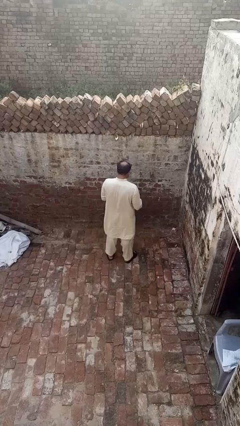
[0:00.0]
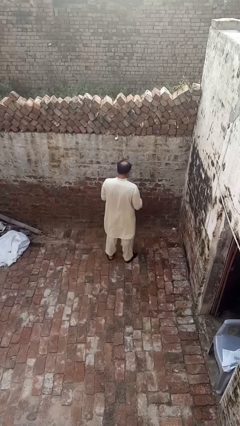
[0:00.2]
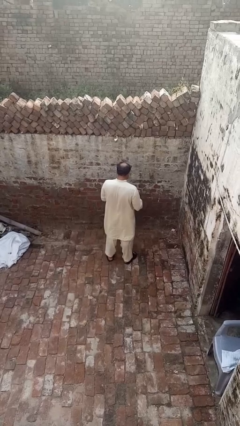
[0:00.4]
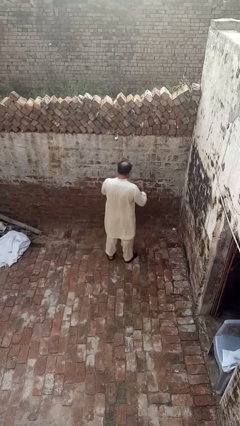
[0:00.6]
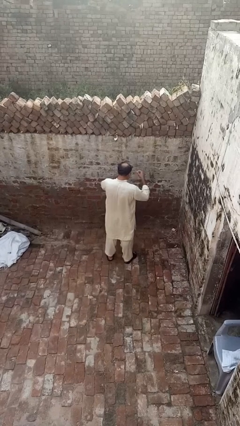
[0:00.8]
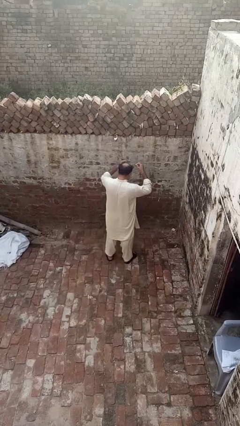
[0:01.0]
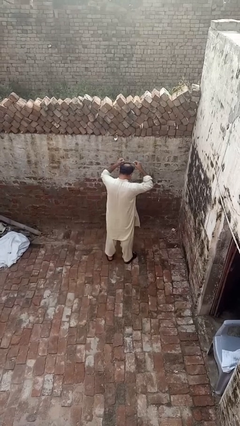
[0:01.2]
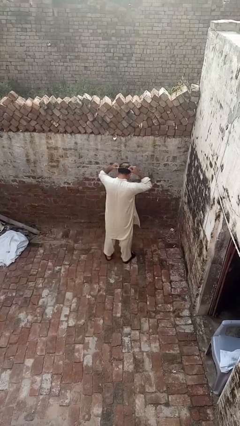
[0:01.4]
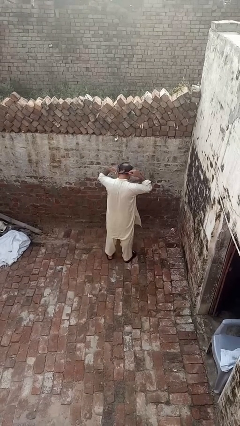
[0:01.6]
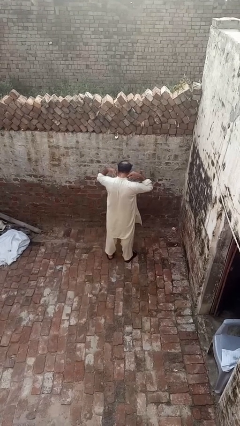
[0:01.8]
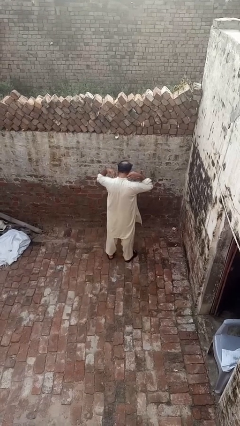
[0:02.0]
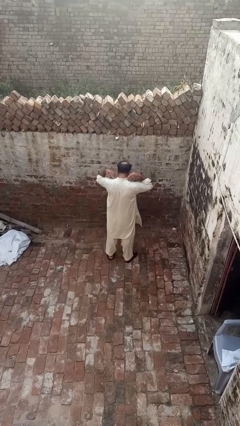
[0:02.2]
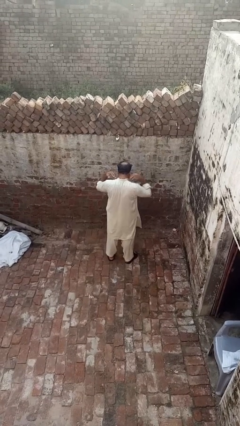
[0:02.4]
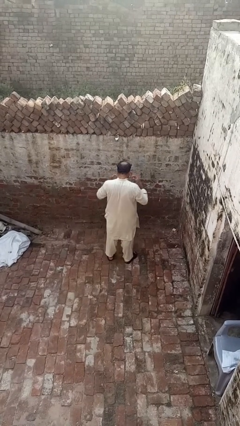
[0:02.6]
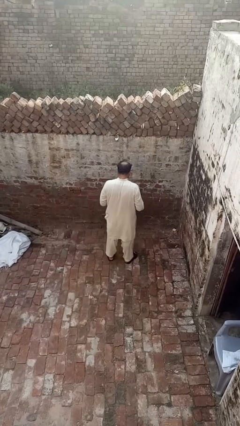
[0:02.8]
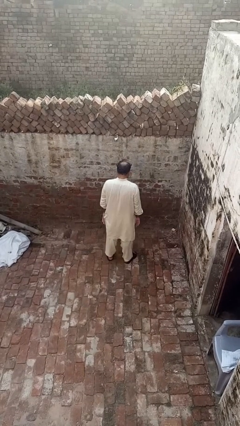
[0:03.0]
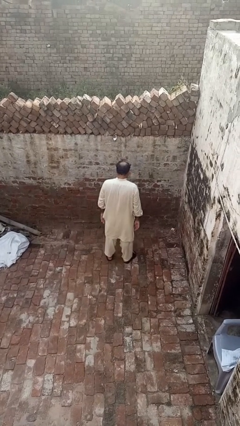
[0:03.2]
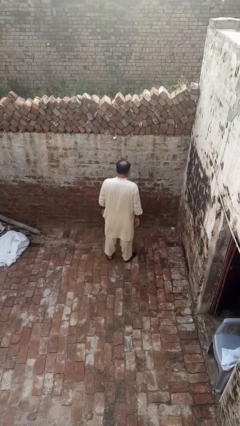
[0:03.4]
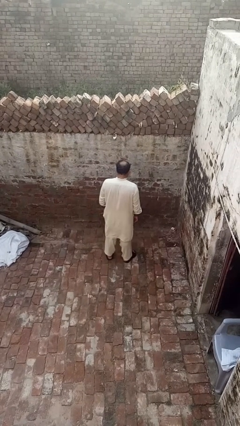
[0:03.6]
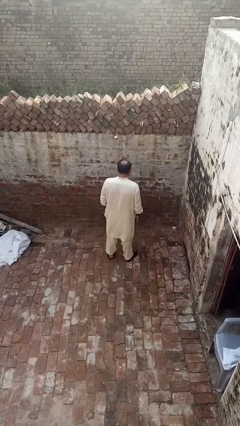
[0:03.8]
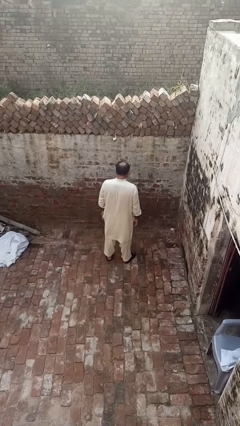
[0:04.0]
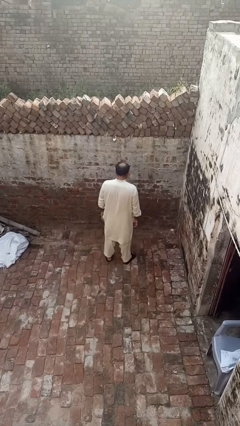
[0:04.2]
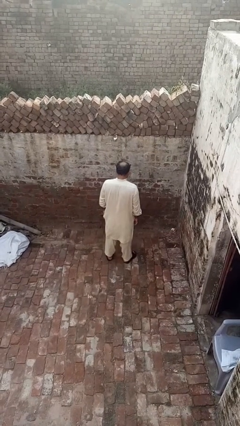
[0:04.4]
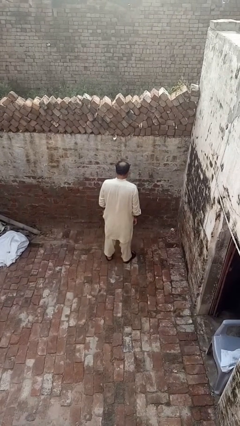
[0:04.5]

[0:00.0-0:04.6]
person puts on necklace

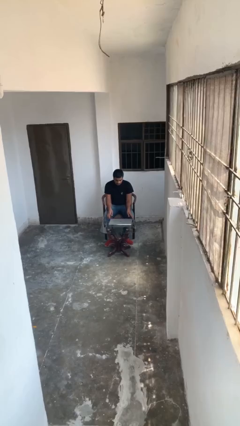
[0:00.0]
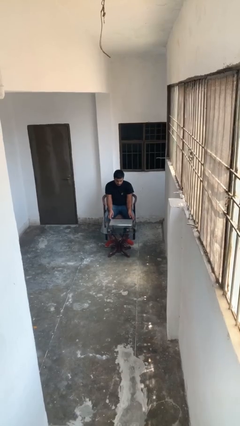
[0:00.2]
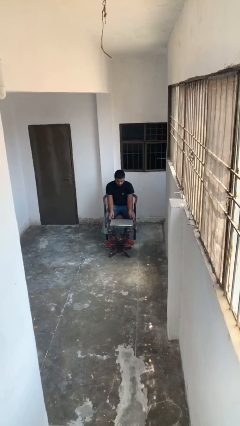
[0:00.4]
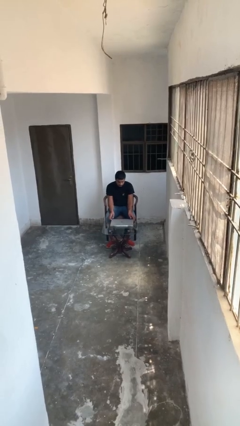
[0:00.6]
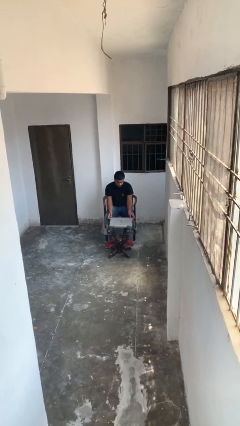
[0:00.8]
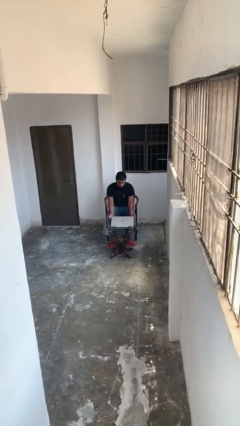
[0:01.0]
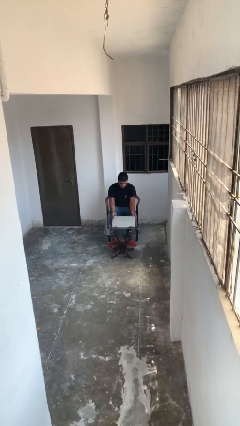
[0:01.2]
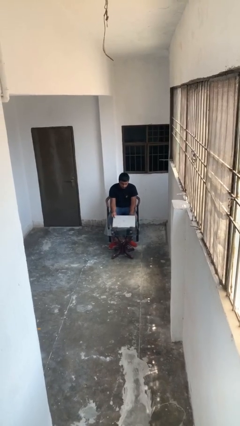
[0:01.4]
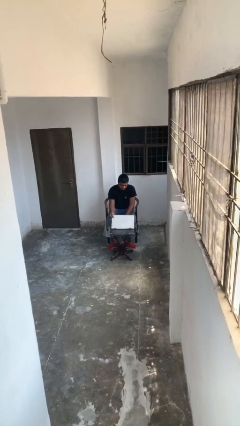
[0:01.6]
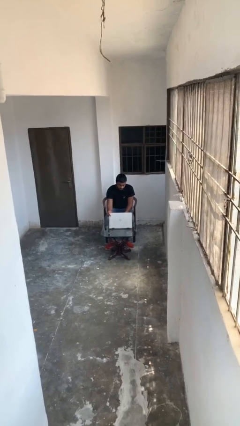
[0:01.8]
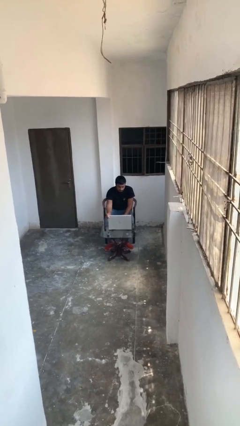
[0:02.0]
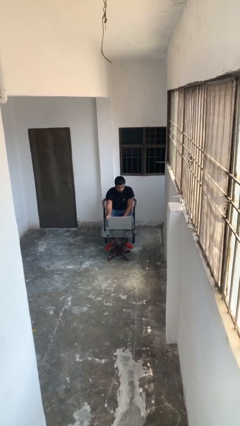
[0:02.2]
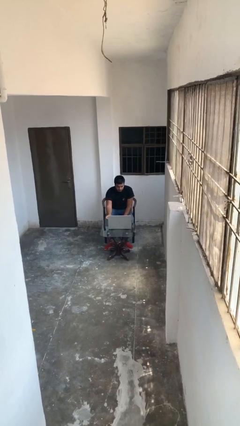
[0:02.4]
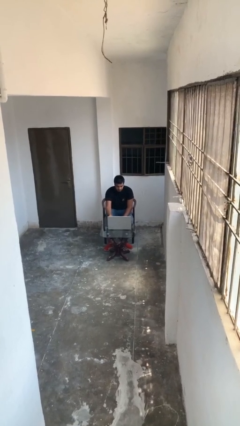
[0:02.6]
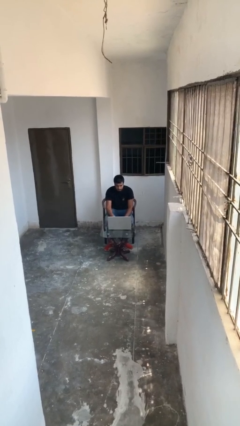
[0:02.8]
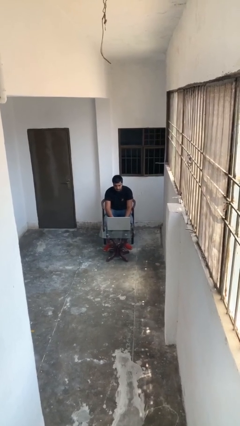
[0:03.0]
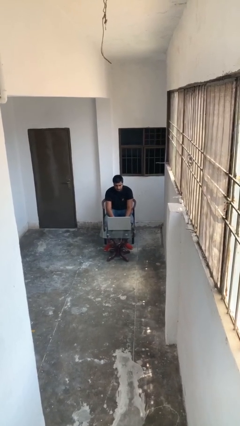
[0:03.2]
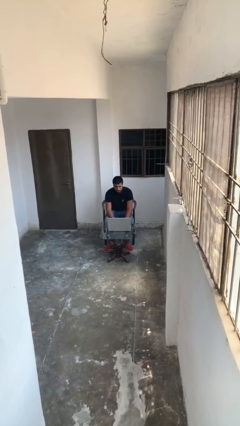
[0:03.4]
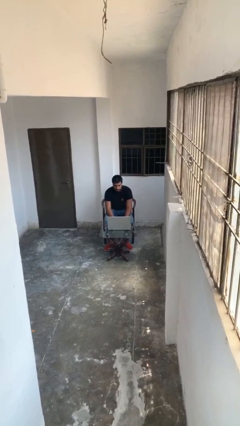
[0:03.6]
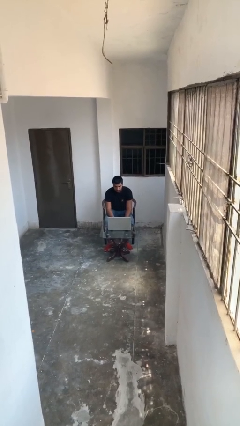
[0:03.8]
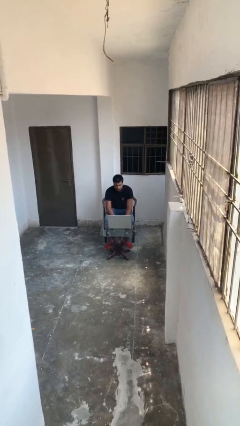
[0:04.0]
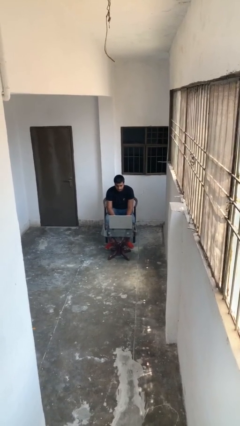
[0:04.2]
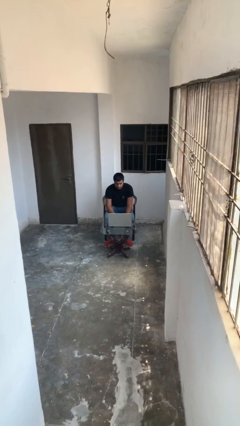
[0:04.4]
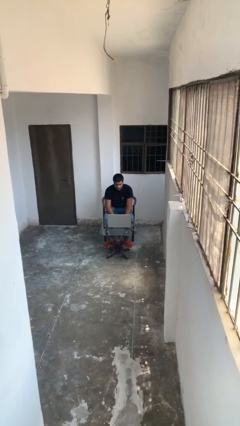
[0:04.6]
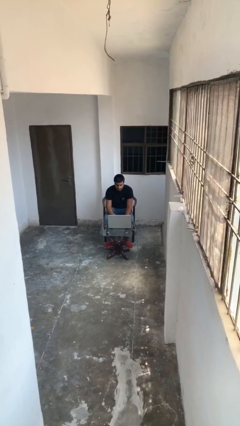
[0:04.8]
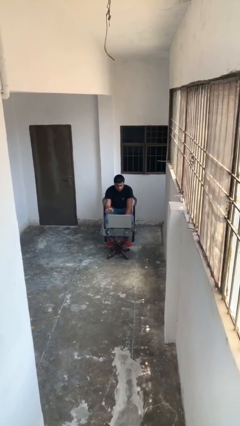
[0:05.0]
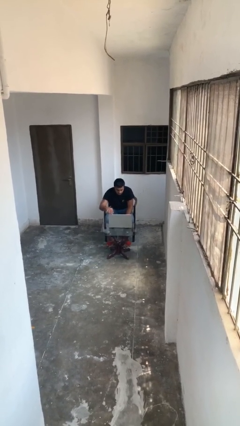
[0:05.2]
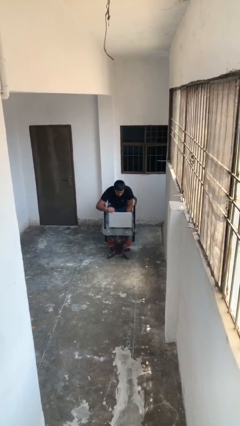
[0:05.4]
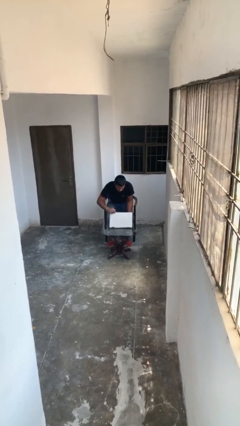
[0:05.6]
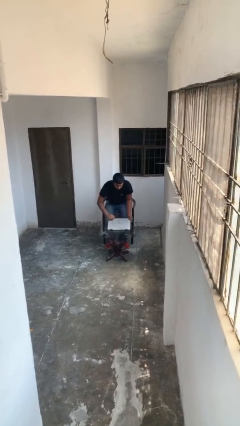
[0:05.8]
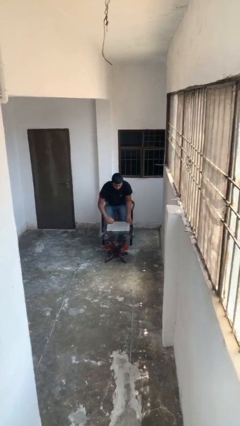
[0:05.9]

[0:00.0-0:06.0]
person interacts with laptop

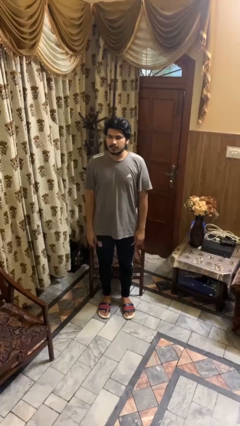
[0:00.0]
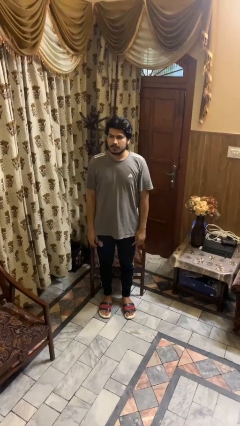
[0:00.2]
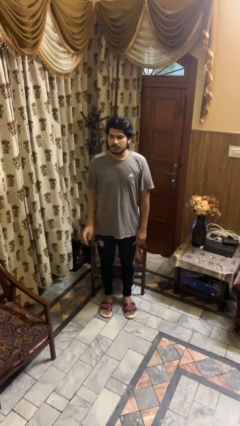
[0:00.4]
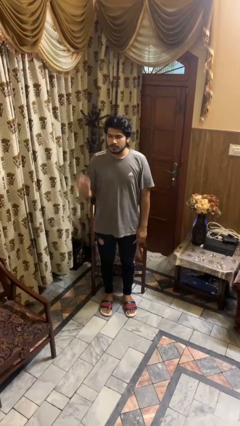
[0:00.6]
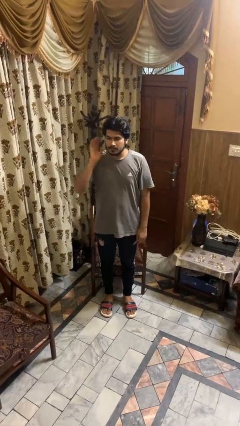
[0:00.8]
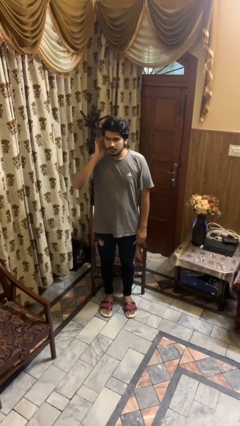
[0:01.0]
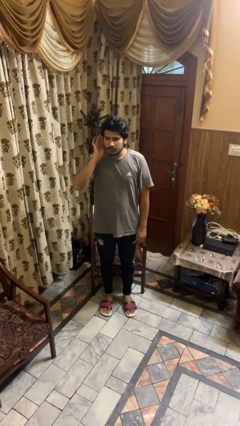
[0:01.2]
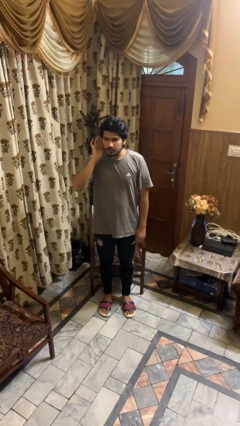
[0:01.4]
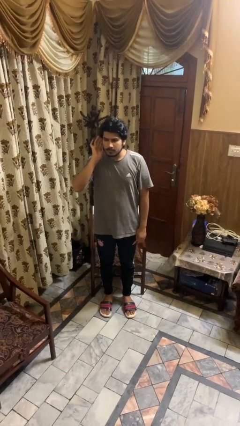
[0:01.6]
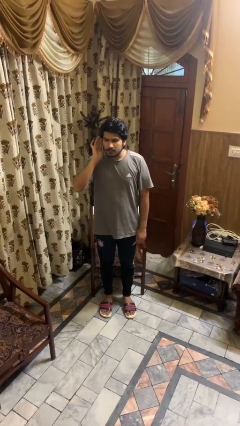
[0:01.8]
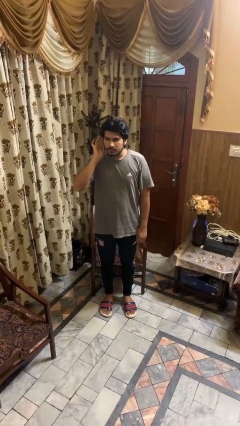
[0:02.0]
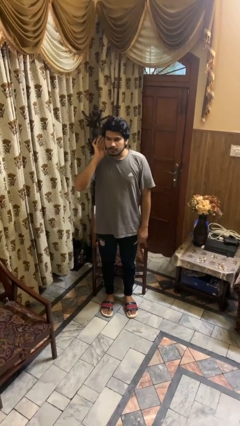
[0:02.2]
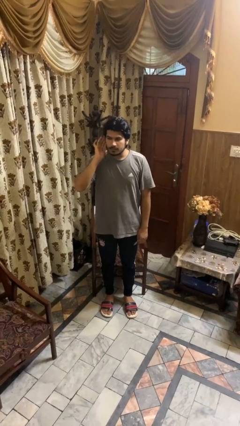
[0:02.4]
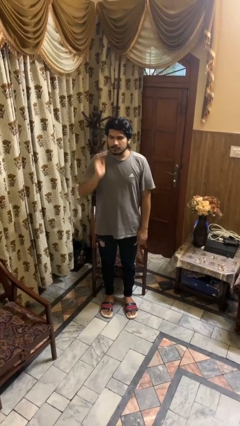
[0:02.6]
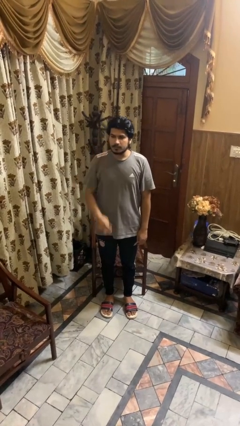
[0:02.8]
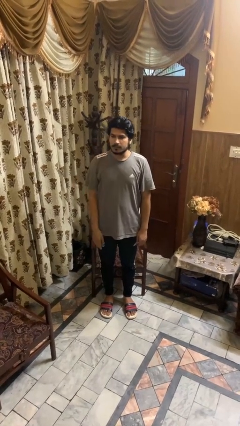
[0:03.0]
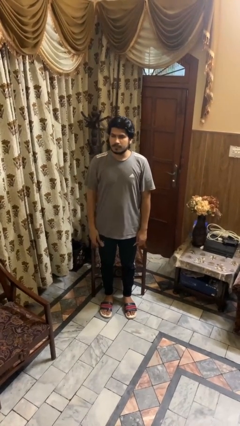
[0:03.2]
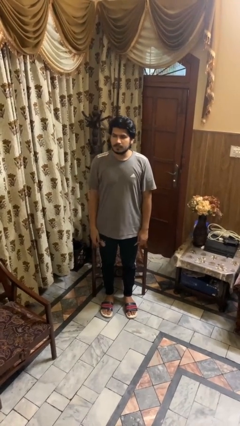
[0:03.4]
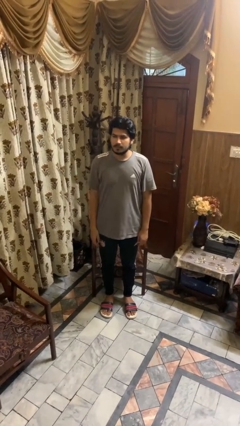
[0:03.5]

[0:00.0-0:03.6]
person gestures listen closely

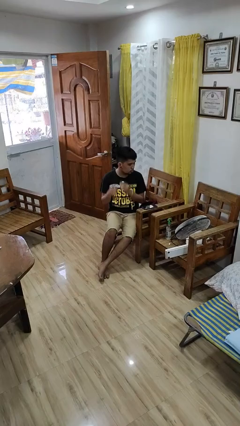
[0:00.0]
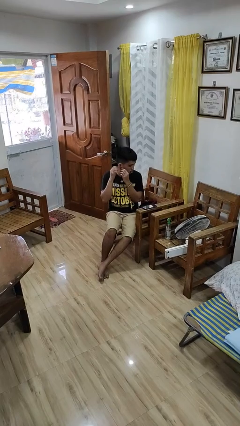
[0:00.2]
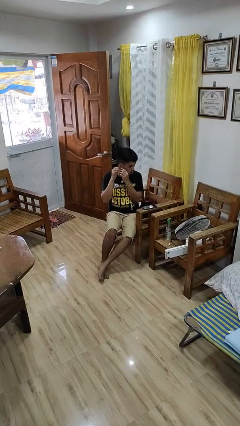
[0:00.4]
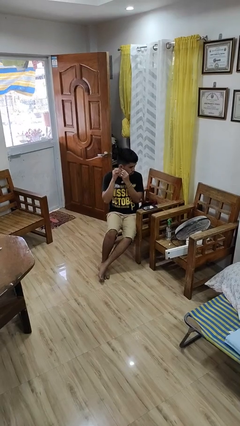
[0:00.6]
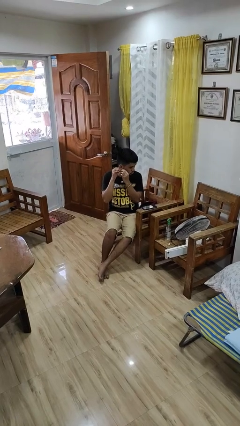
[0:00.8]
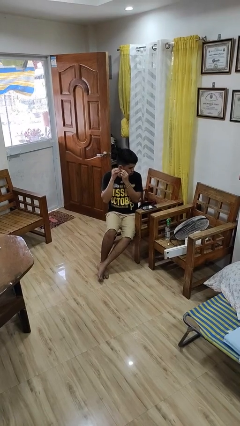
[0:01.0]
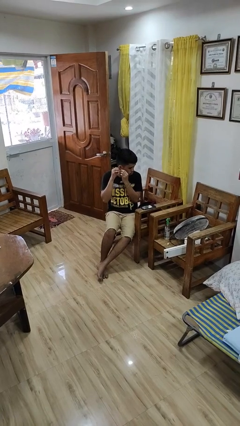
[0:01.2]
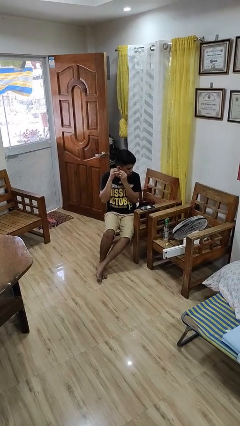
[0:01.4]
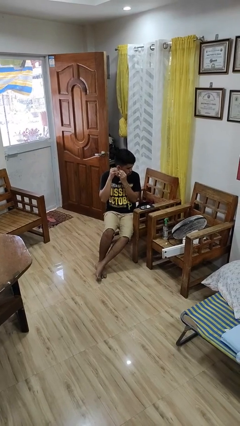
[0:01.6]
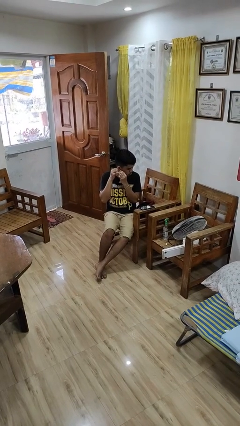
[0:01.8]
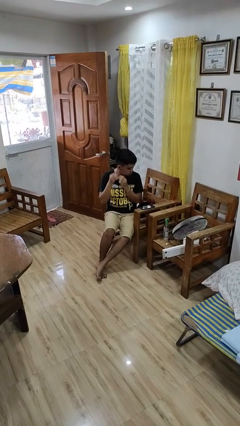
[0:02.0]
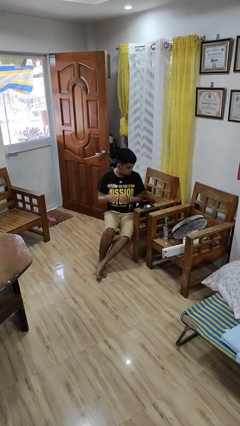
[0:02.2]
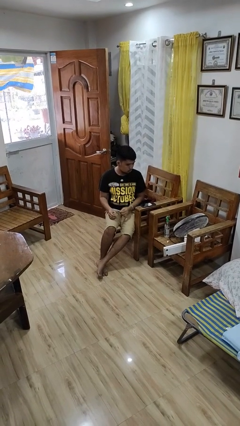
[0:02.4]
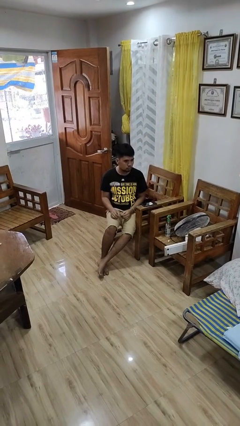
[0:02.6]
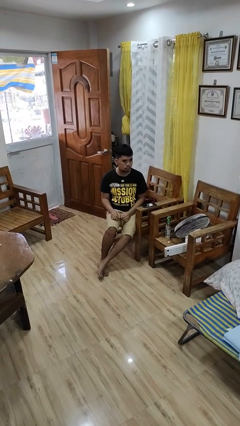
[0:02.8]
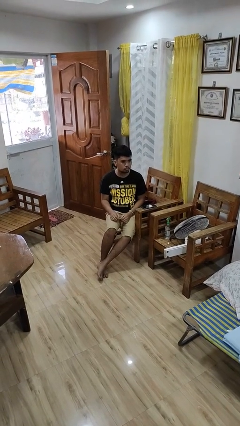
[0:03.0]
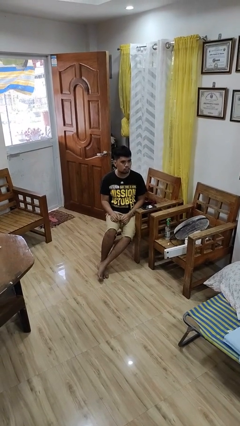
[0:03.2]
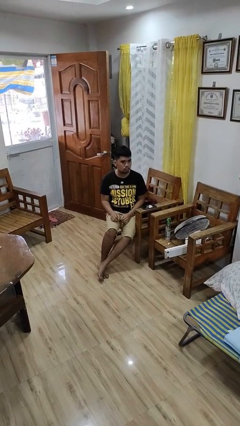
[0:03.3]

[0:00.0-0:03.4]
person takes off earrings
